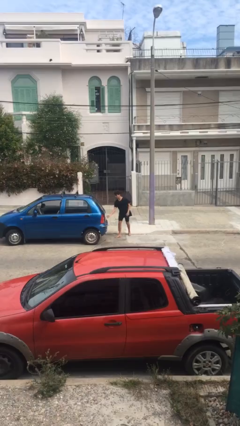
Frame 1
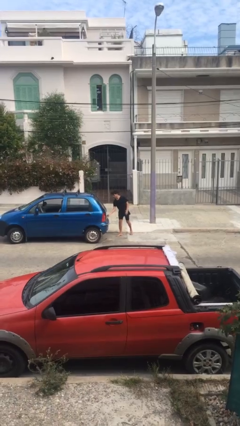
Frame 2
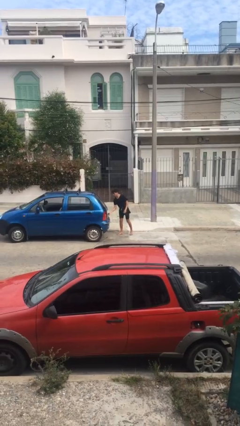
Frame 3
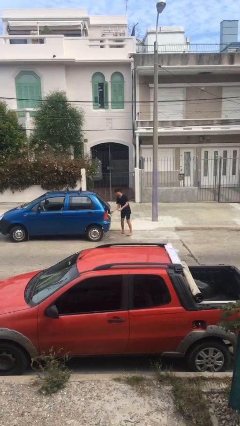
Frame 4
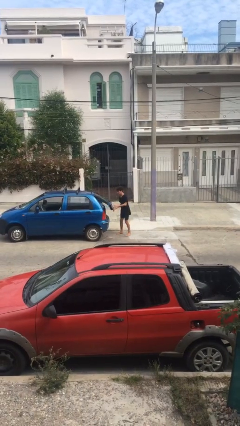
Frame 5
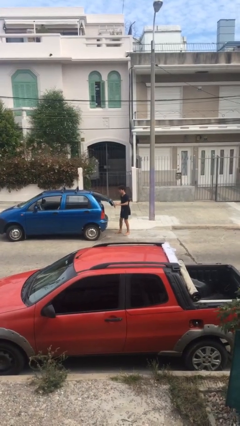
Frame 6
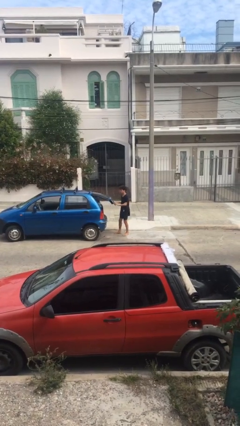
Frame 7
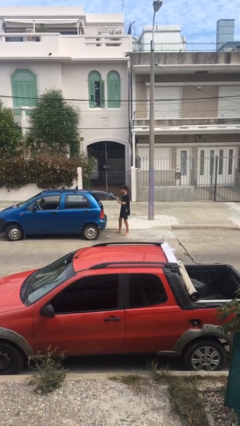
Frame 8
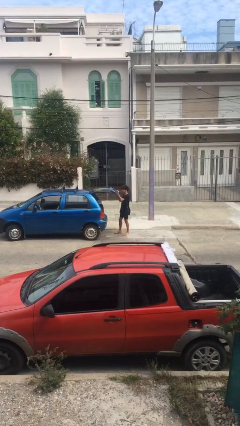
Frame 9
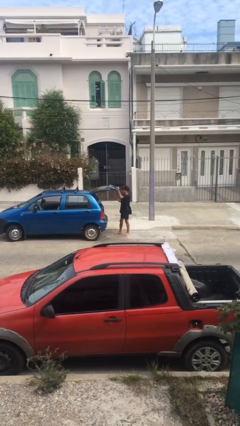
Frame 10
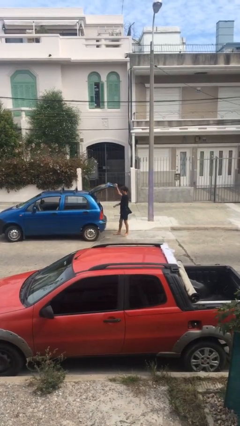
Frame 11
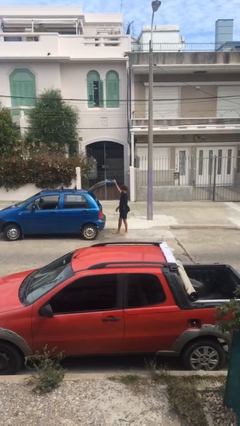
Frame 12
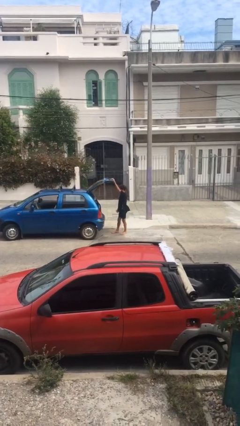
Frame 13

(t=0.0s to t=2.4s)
person opens car trunk

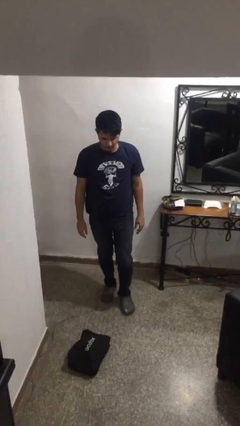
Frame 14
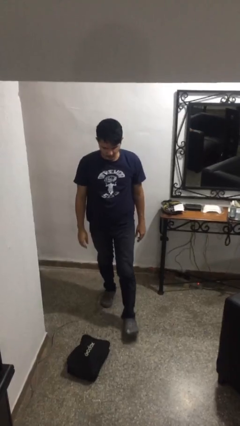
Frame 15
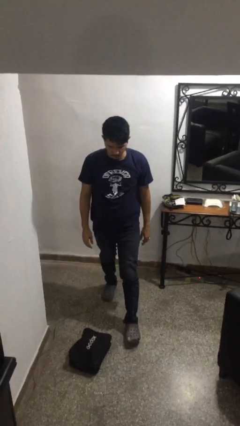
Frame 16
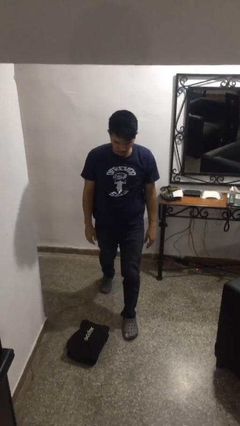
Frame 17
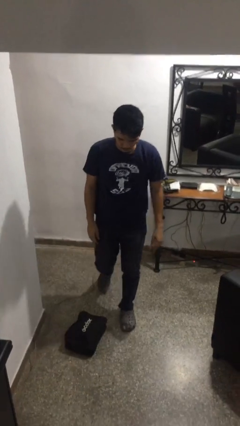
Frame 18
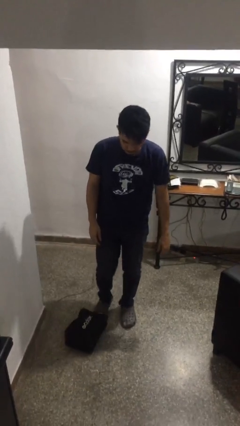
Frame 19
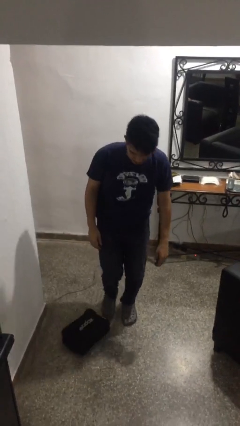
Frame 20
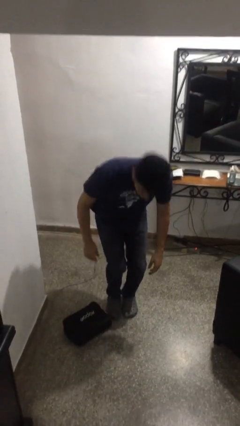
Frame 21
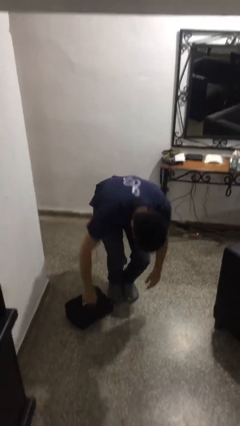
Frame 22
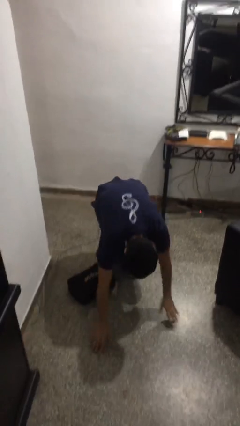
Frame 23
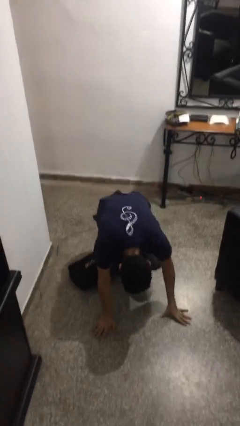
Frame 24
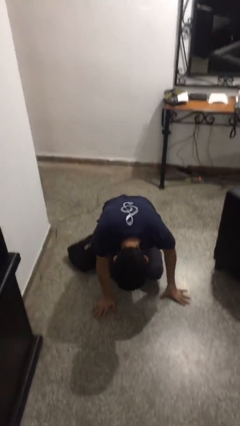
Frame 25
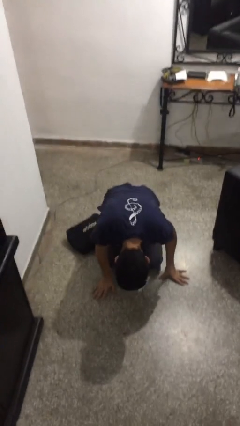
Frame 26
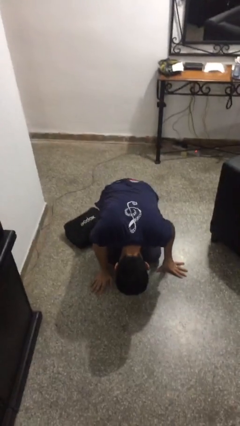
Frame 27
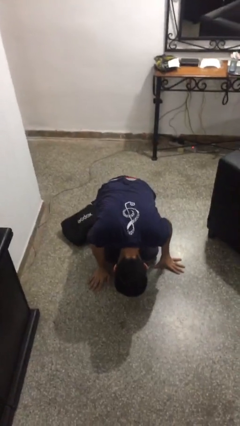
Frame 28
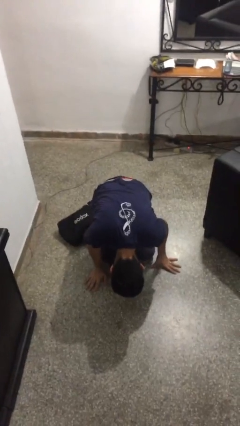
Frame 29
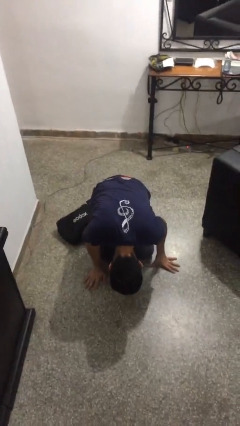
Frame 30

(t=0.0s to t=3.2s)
person trips on object on floor

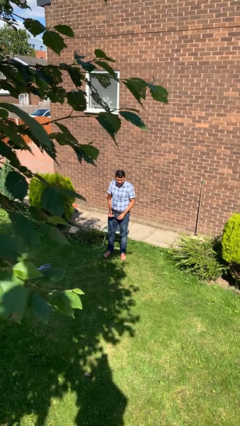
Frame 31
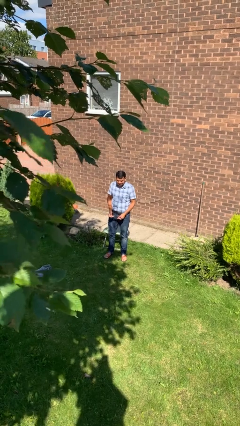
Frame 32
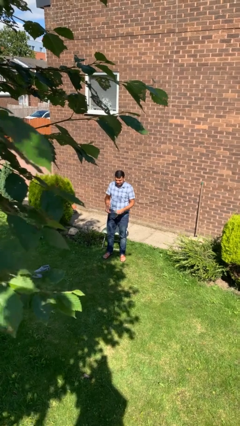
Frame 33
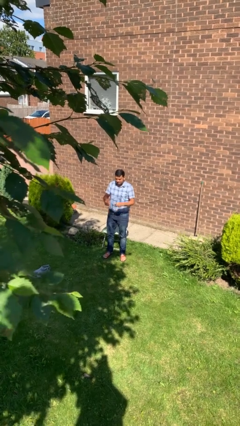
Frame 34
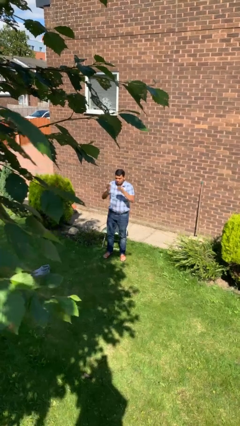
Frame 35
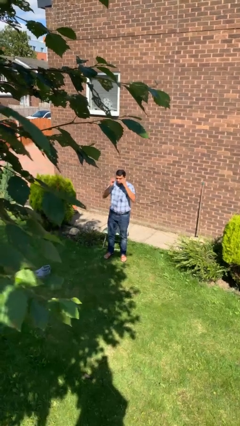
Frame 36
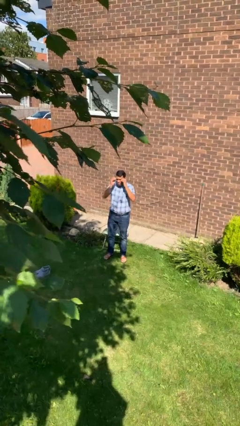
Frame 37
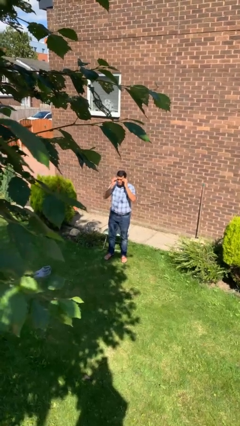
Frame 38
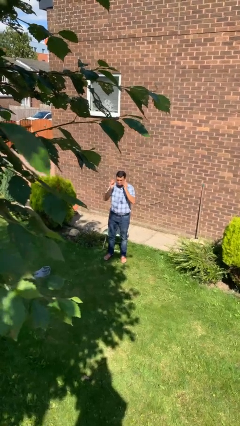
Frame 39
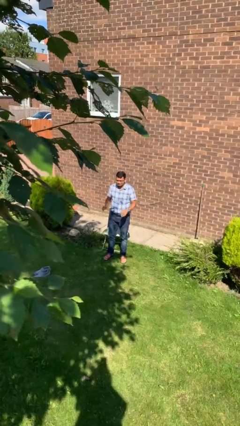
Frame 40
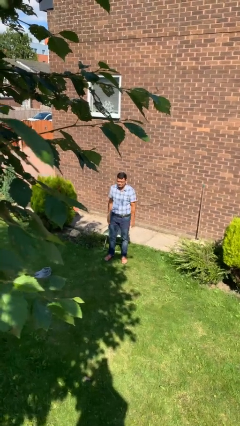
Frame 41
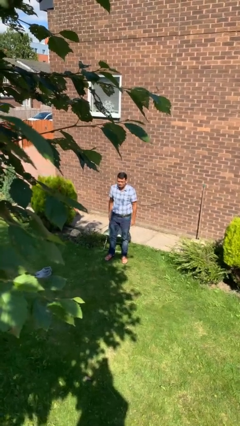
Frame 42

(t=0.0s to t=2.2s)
person puts on glasses

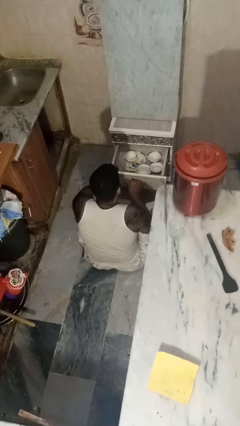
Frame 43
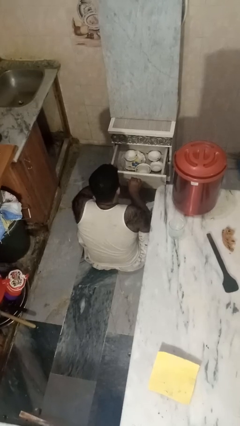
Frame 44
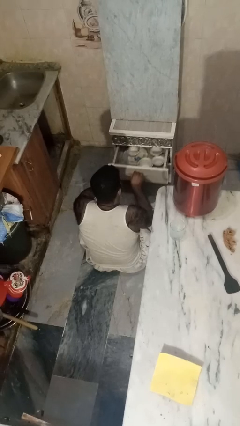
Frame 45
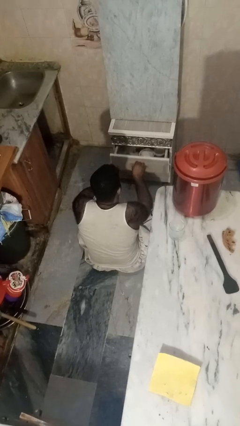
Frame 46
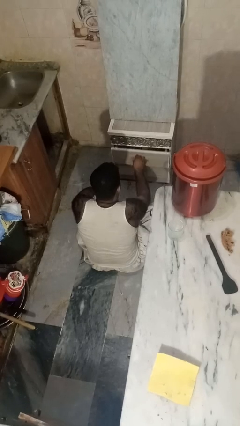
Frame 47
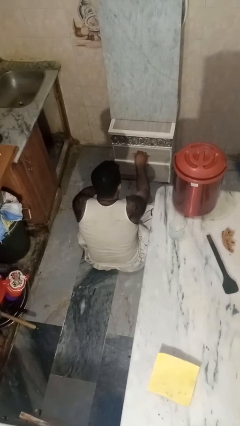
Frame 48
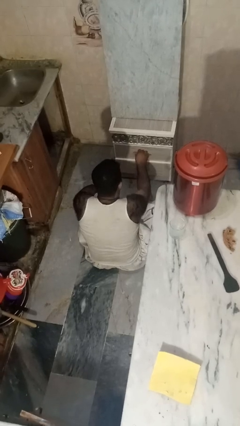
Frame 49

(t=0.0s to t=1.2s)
person closes kitchen drawer

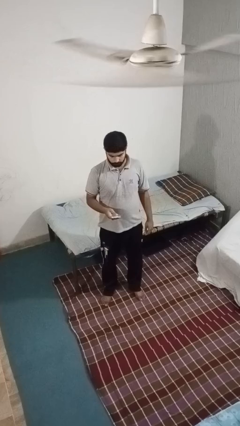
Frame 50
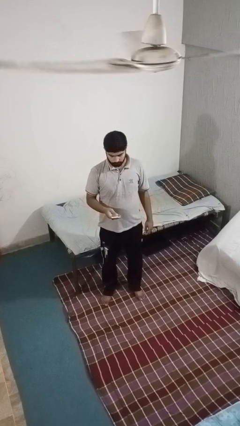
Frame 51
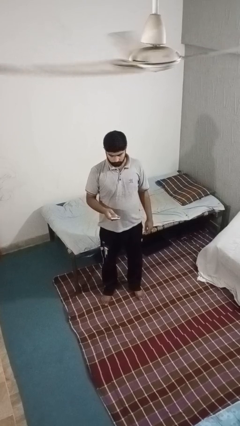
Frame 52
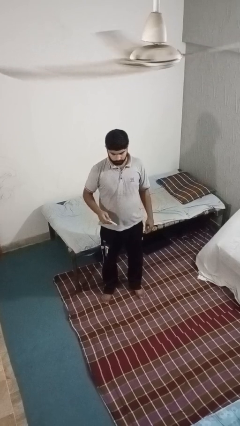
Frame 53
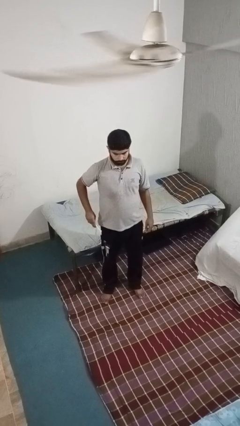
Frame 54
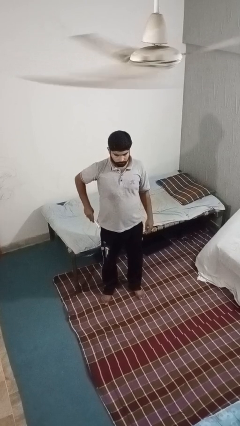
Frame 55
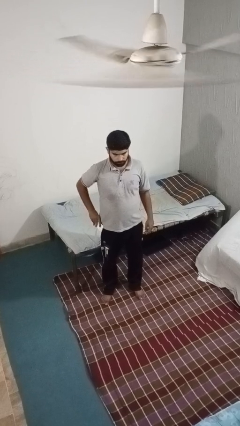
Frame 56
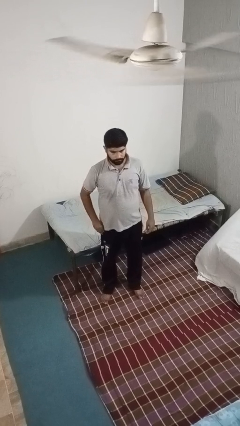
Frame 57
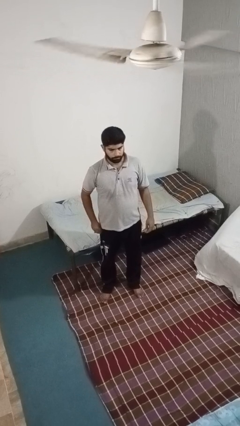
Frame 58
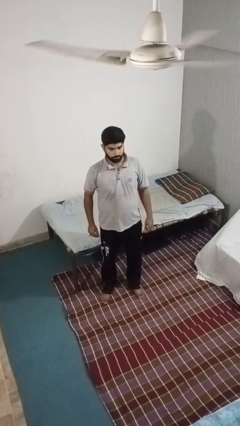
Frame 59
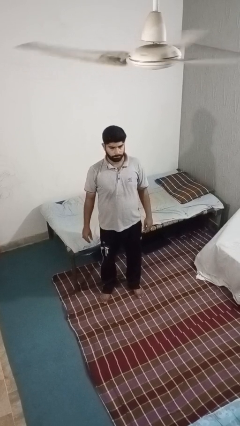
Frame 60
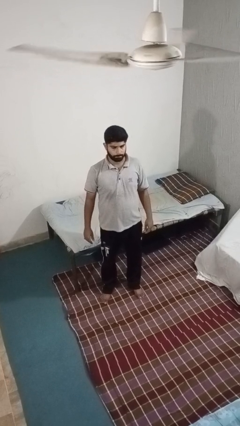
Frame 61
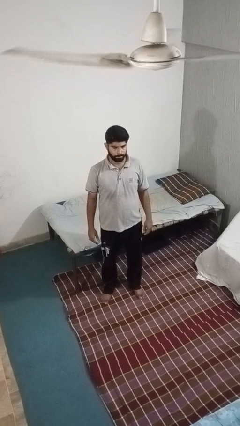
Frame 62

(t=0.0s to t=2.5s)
person puts phone into pocket

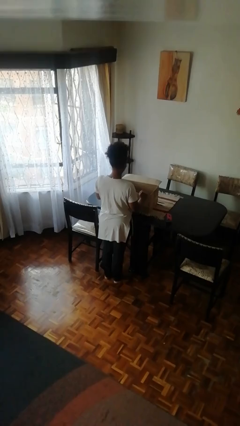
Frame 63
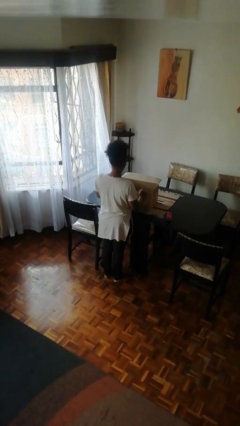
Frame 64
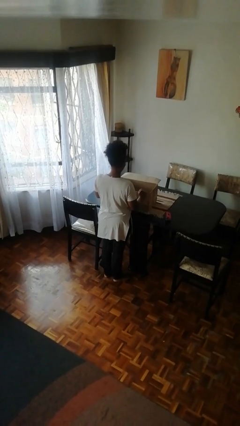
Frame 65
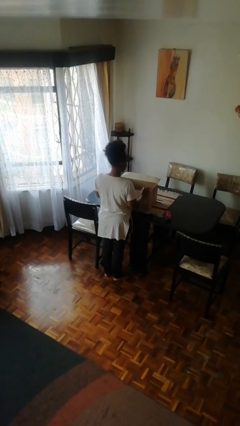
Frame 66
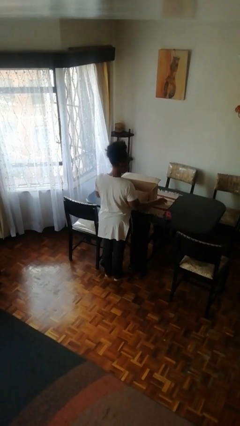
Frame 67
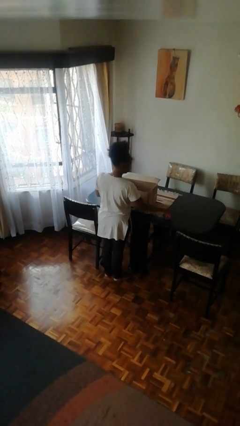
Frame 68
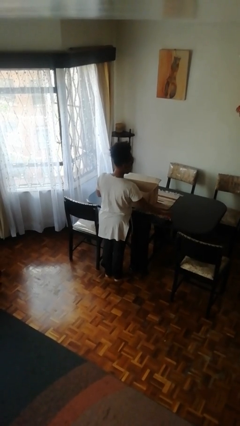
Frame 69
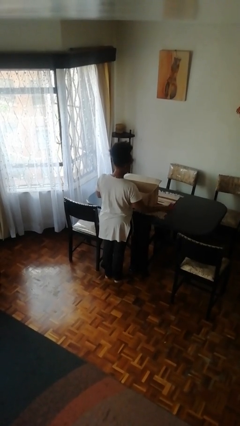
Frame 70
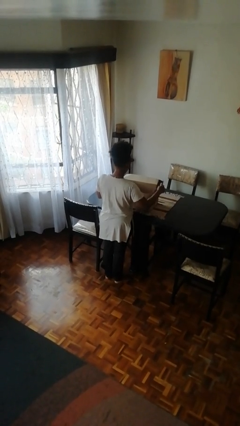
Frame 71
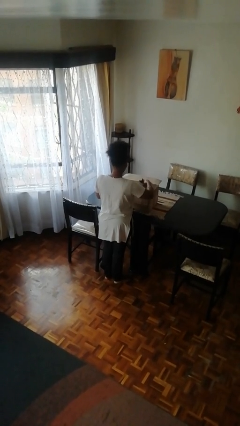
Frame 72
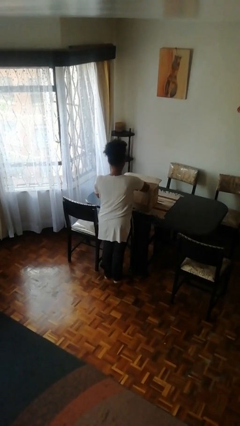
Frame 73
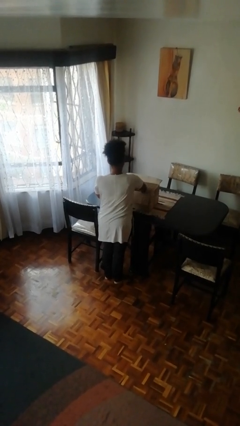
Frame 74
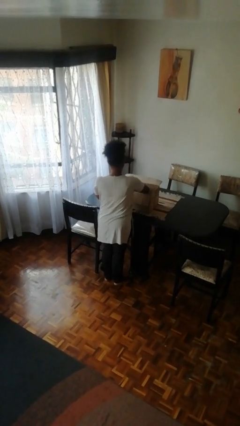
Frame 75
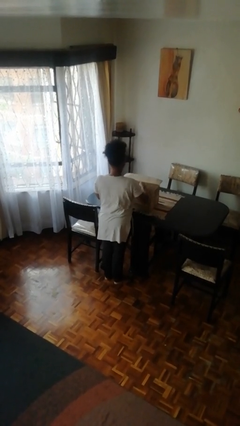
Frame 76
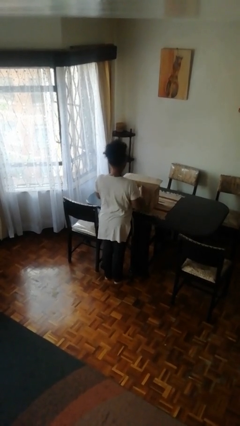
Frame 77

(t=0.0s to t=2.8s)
person puts object into box

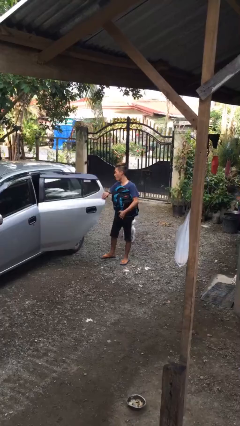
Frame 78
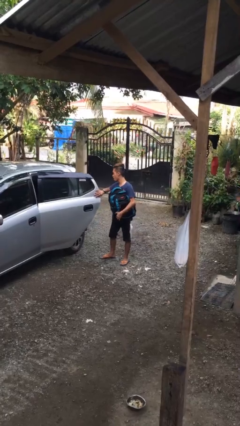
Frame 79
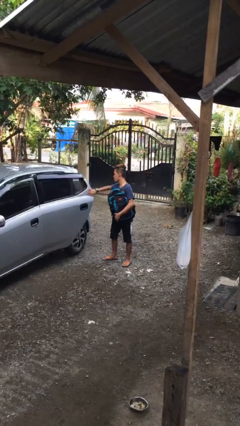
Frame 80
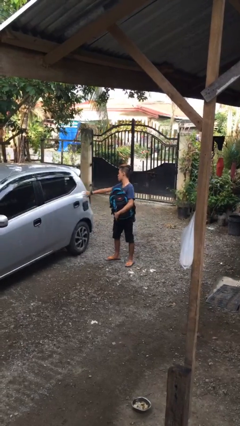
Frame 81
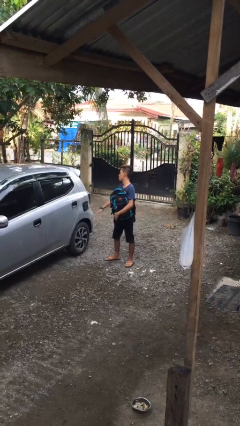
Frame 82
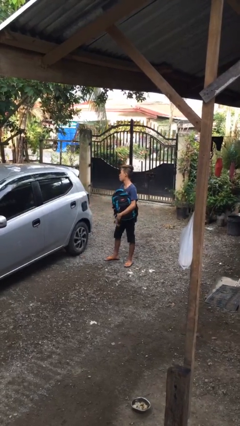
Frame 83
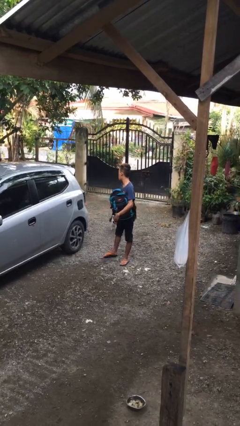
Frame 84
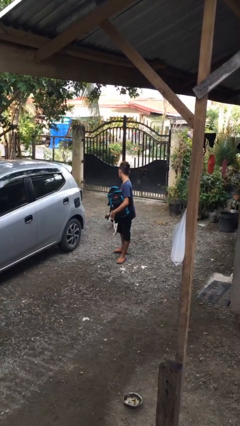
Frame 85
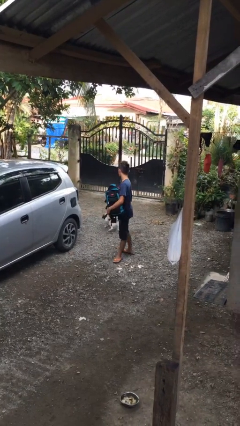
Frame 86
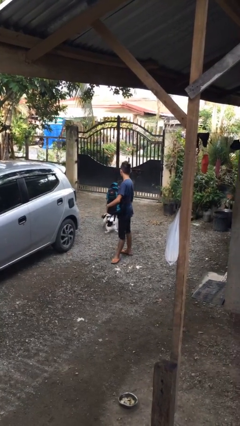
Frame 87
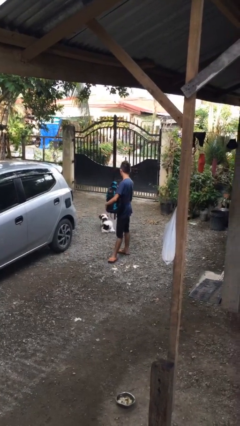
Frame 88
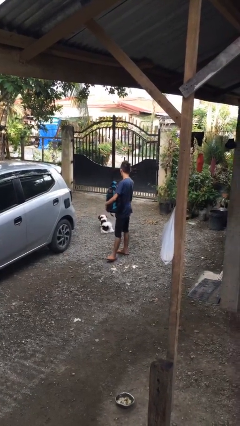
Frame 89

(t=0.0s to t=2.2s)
person closes car door

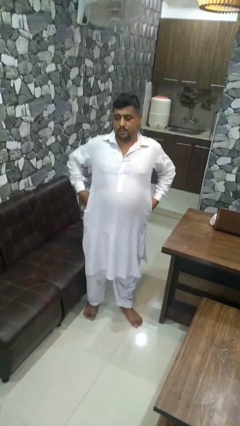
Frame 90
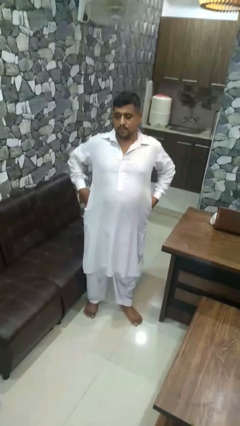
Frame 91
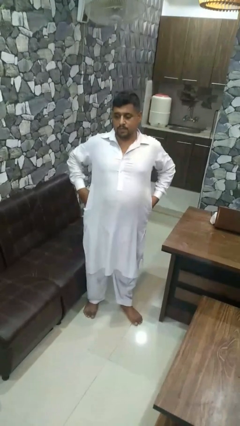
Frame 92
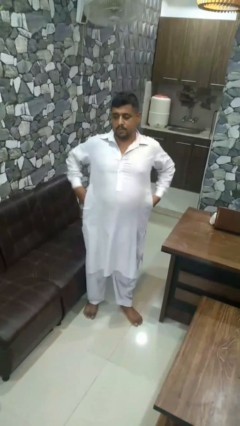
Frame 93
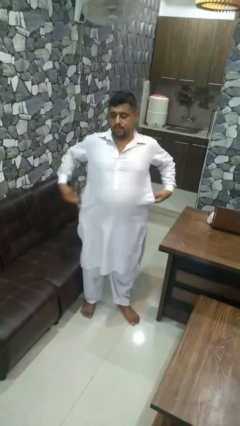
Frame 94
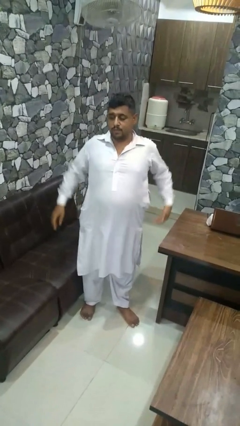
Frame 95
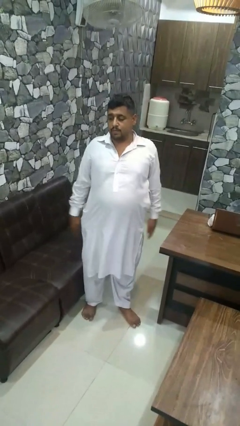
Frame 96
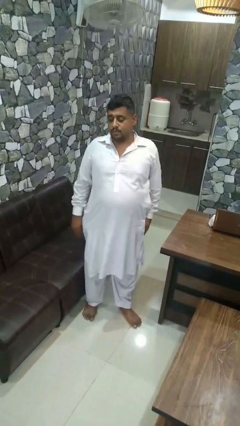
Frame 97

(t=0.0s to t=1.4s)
person puts hands in back pockets
